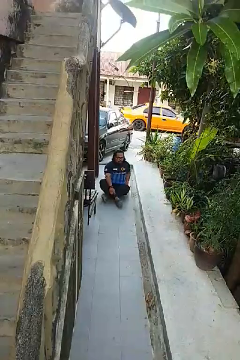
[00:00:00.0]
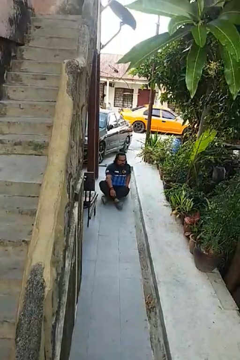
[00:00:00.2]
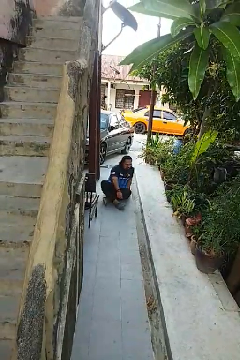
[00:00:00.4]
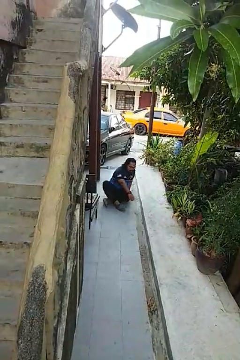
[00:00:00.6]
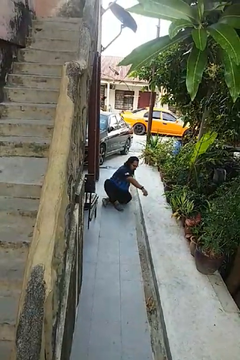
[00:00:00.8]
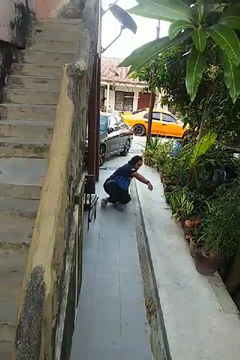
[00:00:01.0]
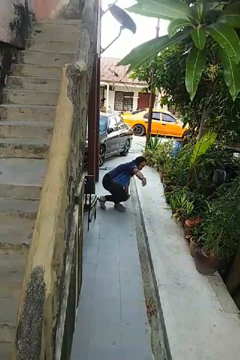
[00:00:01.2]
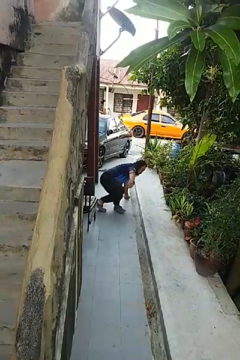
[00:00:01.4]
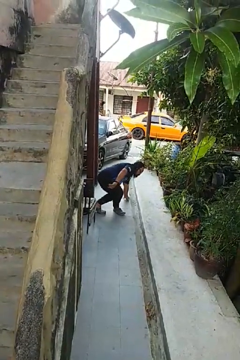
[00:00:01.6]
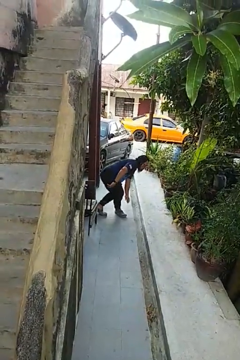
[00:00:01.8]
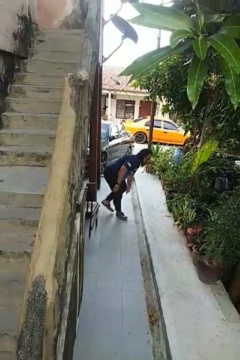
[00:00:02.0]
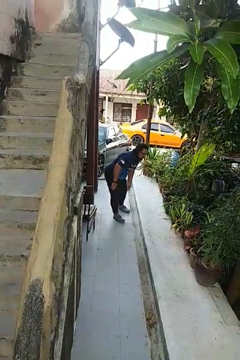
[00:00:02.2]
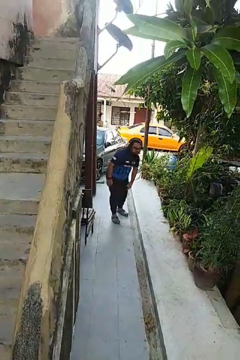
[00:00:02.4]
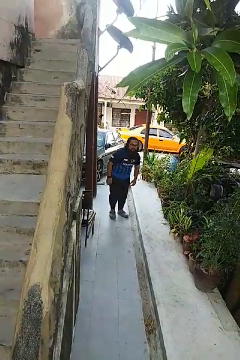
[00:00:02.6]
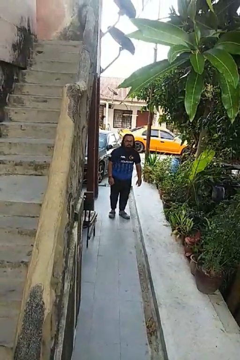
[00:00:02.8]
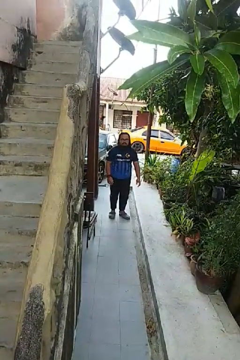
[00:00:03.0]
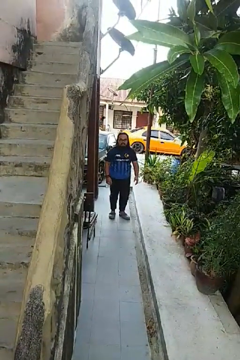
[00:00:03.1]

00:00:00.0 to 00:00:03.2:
person stands up from floor

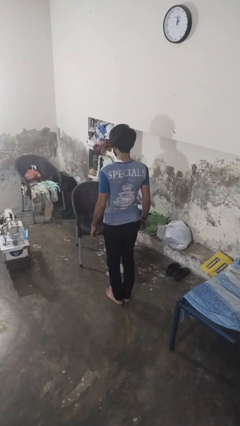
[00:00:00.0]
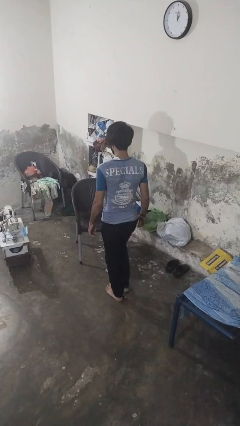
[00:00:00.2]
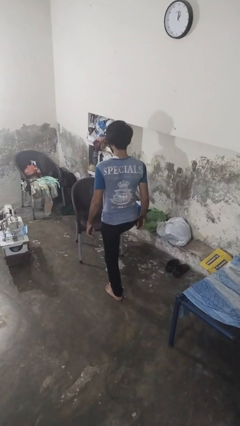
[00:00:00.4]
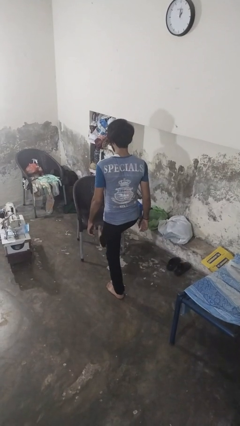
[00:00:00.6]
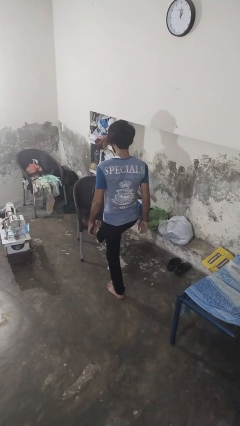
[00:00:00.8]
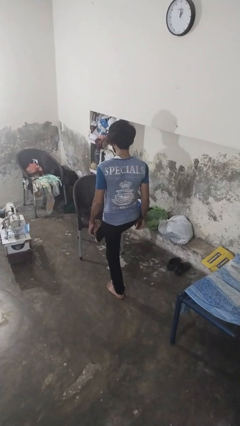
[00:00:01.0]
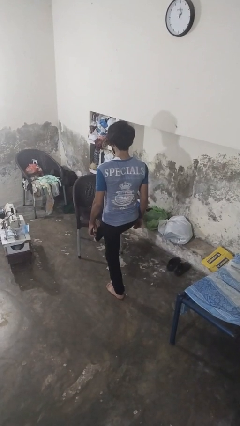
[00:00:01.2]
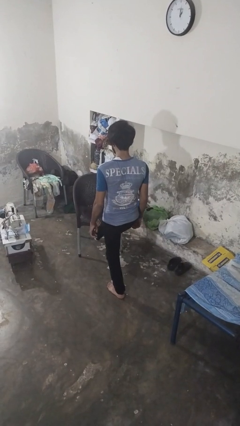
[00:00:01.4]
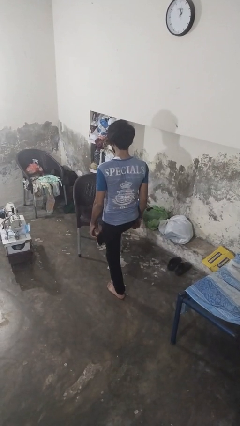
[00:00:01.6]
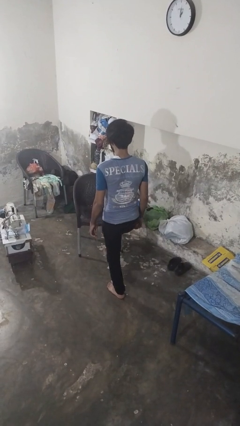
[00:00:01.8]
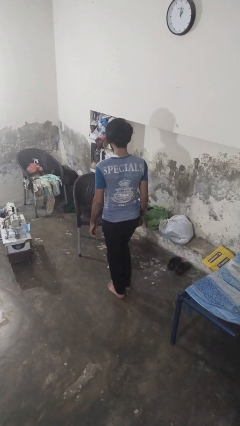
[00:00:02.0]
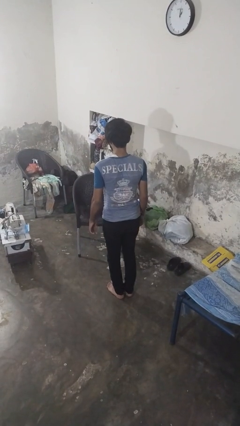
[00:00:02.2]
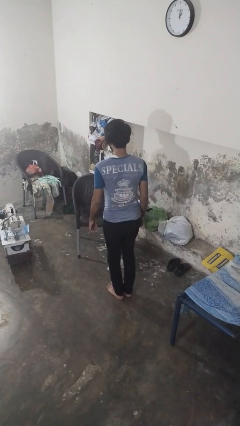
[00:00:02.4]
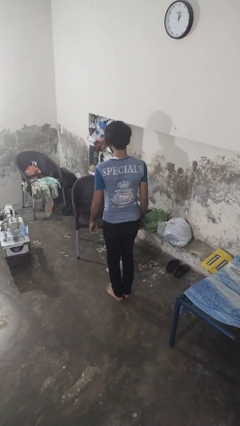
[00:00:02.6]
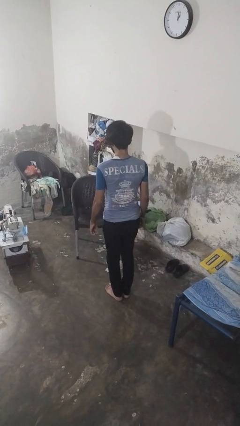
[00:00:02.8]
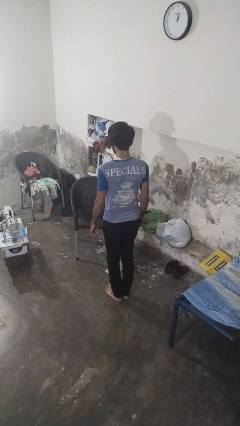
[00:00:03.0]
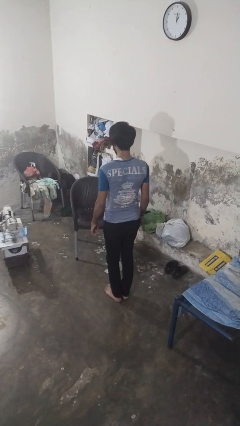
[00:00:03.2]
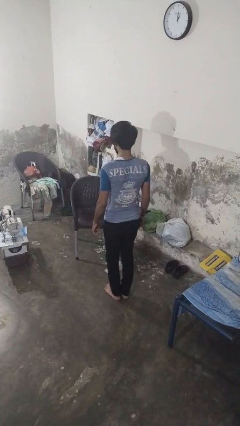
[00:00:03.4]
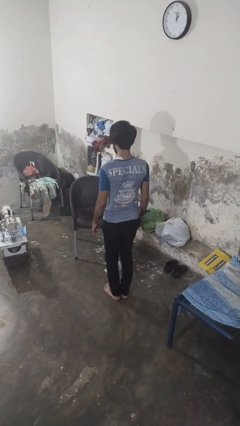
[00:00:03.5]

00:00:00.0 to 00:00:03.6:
person stubs toe

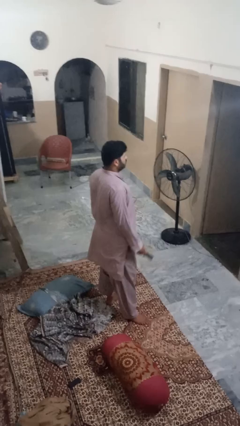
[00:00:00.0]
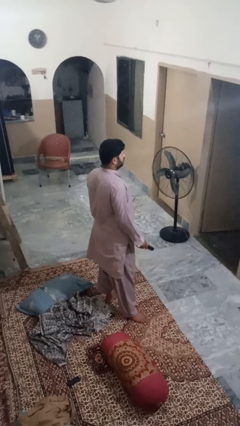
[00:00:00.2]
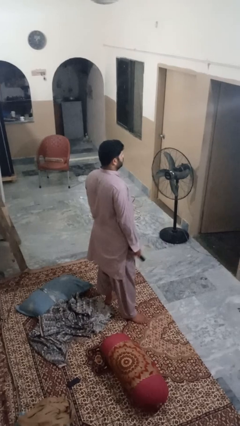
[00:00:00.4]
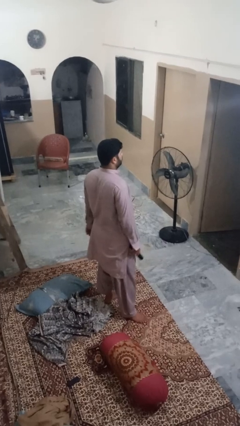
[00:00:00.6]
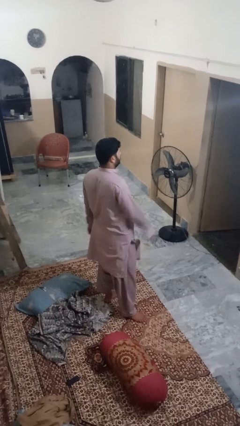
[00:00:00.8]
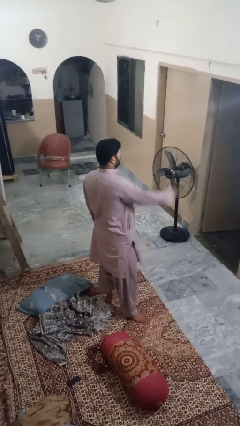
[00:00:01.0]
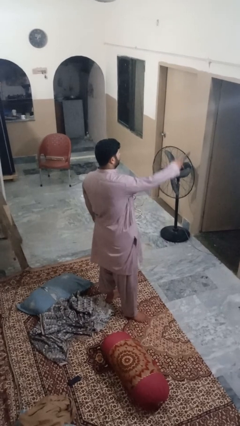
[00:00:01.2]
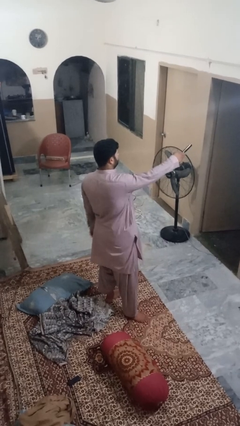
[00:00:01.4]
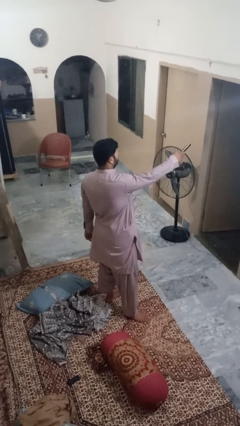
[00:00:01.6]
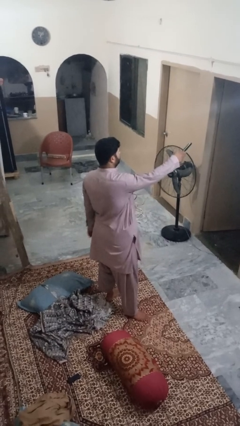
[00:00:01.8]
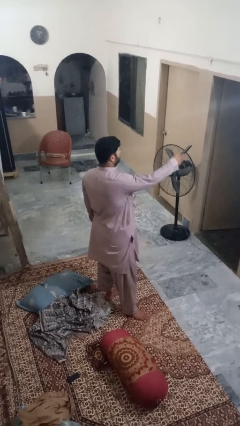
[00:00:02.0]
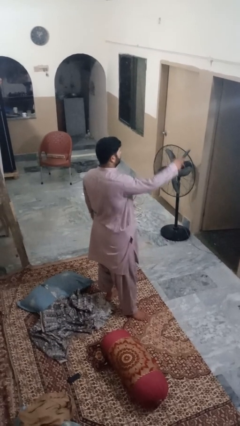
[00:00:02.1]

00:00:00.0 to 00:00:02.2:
person uses television remote

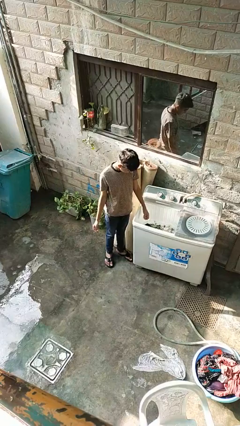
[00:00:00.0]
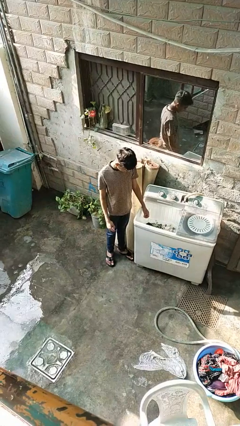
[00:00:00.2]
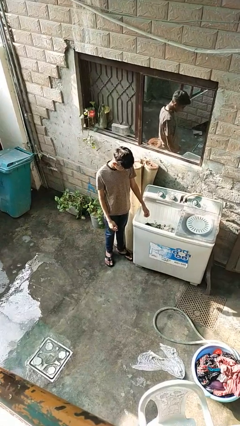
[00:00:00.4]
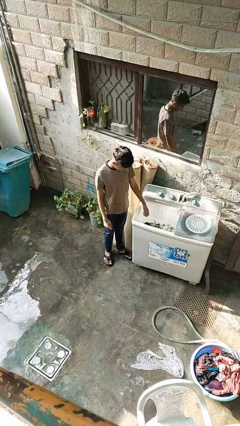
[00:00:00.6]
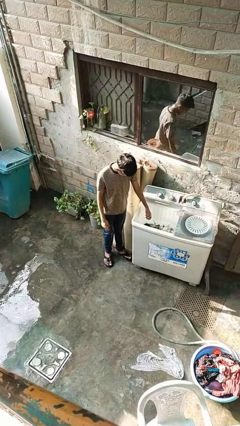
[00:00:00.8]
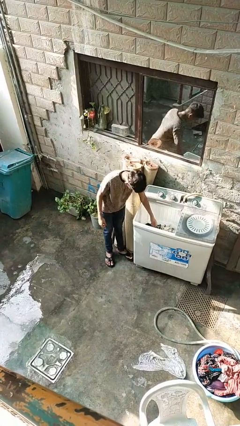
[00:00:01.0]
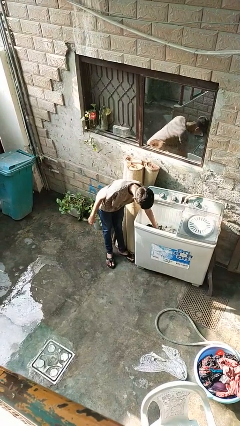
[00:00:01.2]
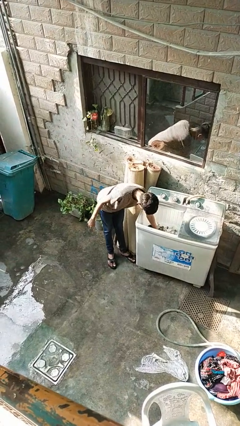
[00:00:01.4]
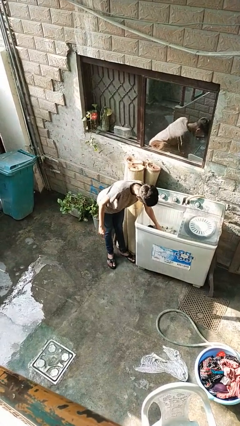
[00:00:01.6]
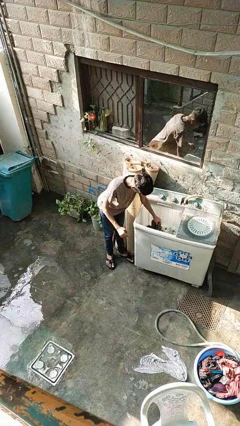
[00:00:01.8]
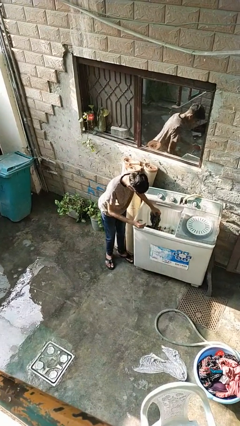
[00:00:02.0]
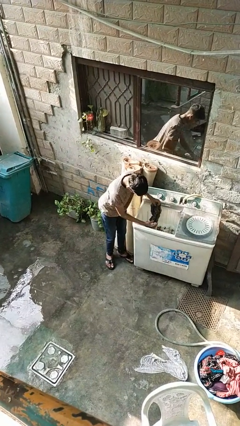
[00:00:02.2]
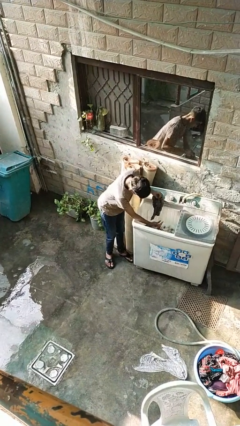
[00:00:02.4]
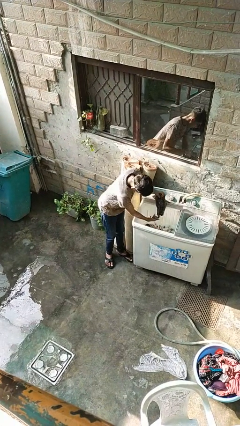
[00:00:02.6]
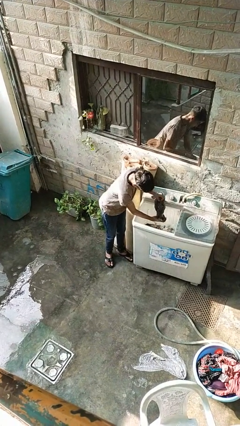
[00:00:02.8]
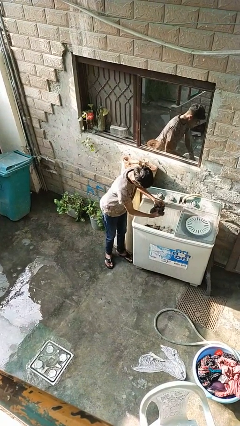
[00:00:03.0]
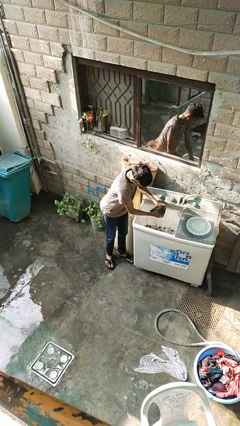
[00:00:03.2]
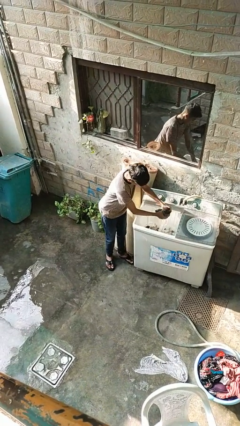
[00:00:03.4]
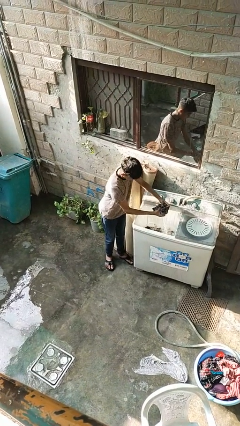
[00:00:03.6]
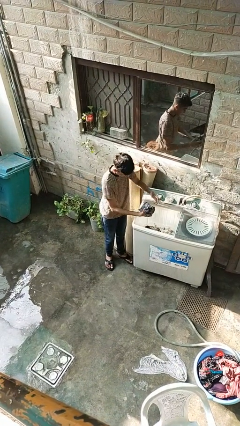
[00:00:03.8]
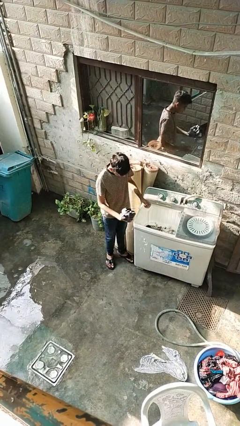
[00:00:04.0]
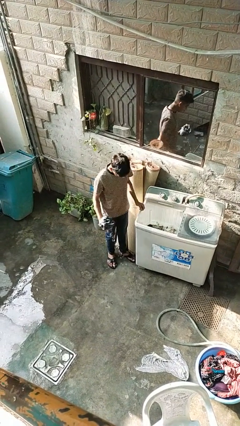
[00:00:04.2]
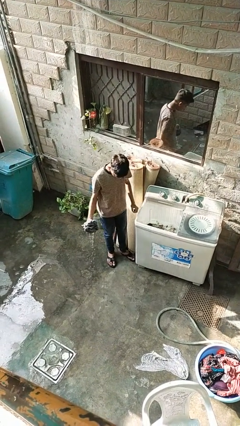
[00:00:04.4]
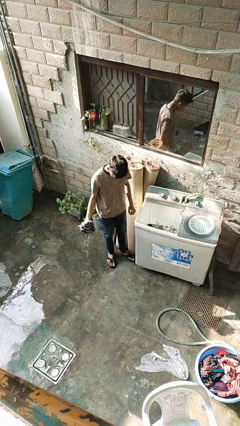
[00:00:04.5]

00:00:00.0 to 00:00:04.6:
person unloads clotheswasher

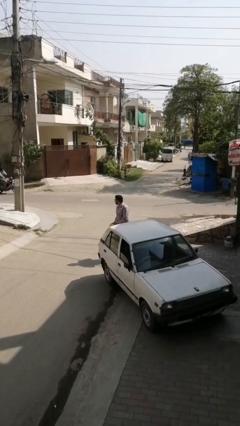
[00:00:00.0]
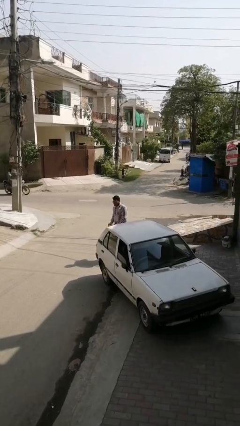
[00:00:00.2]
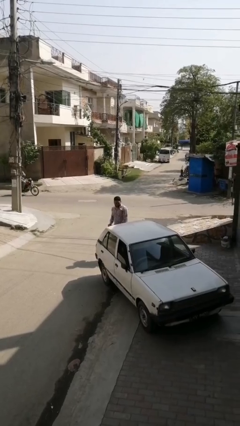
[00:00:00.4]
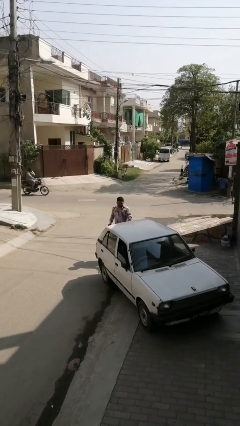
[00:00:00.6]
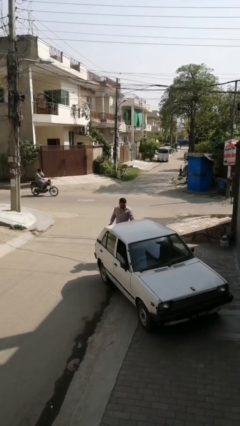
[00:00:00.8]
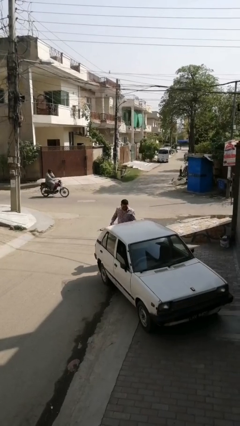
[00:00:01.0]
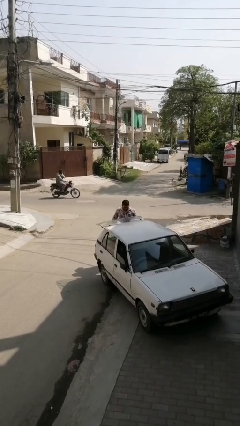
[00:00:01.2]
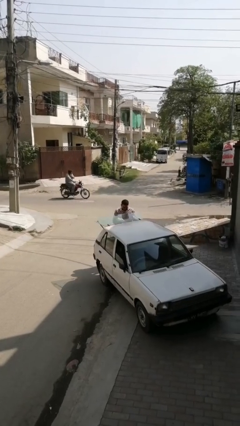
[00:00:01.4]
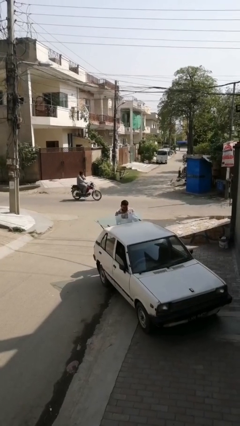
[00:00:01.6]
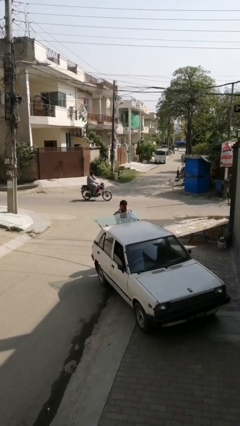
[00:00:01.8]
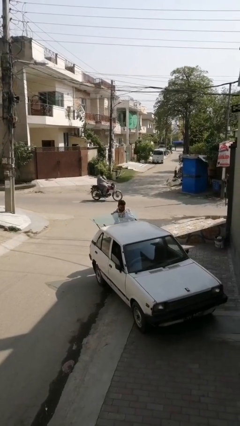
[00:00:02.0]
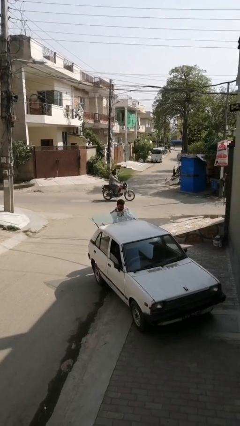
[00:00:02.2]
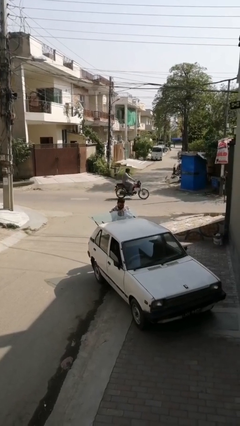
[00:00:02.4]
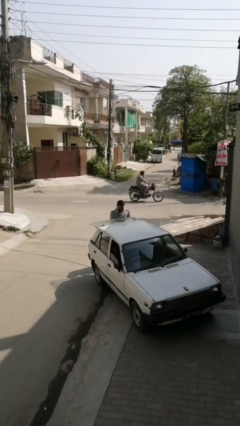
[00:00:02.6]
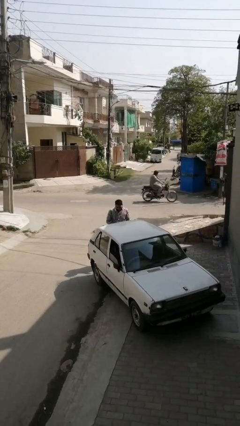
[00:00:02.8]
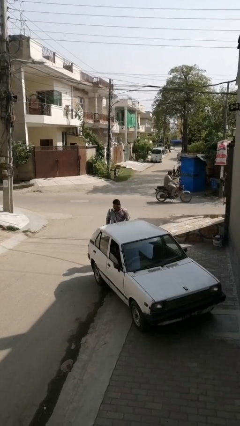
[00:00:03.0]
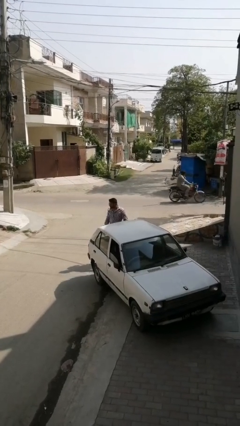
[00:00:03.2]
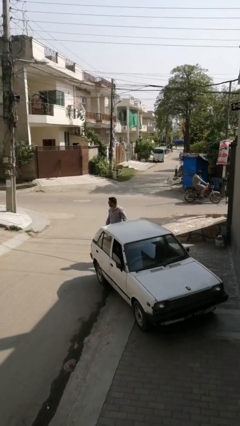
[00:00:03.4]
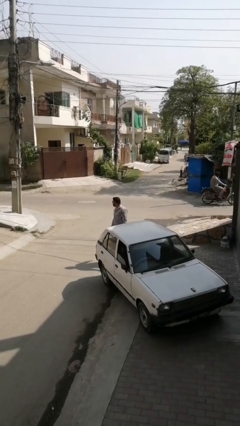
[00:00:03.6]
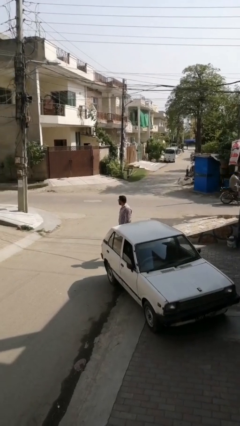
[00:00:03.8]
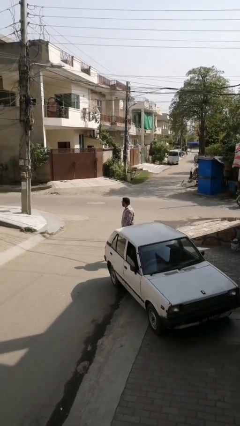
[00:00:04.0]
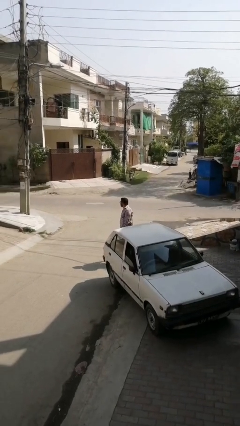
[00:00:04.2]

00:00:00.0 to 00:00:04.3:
person loads car

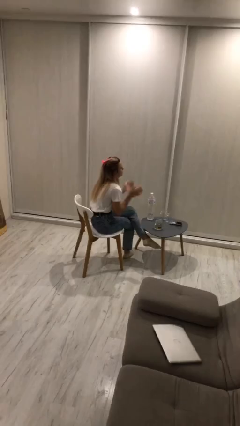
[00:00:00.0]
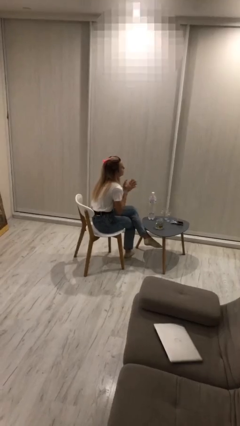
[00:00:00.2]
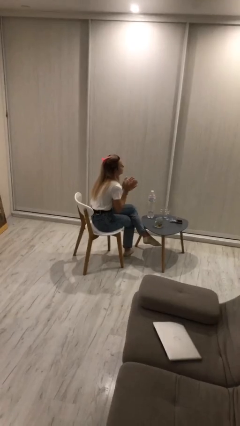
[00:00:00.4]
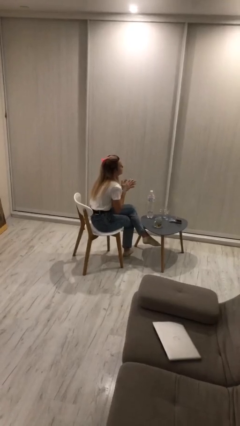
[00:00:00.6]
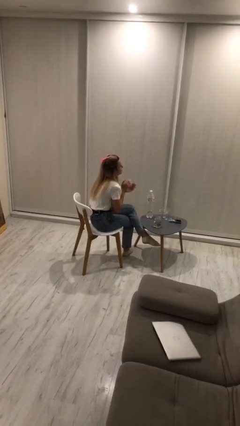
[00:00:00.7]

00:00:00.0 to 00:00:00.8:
person claps hands
